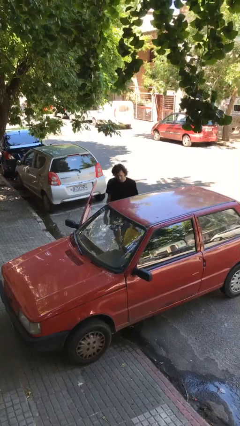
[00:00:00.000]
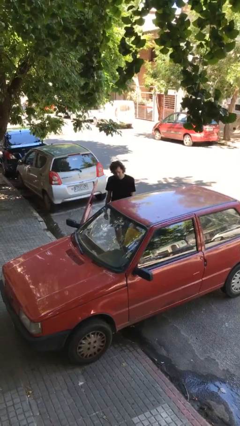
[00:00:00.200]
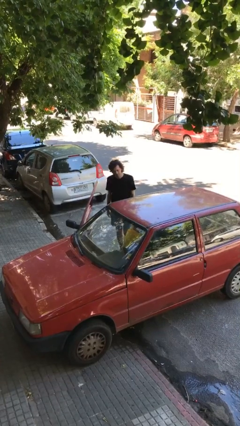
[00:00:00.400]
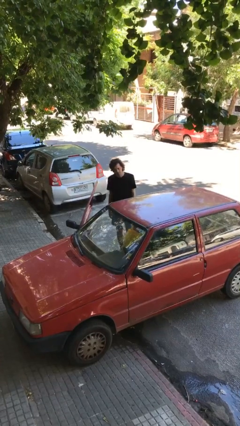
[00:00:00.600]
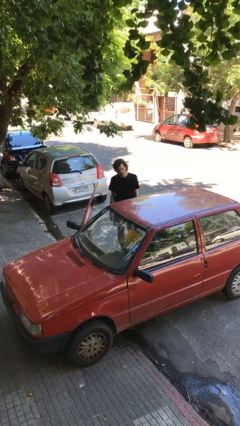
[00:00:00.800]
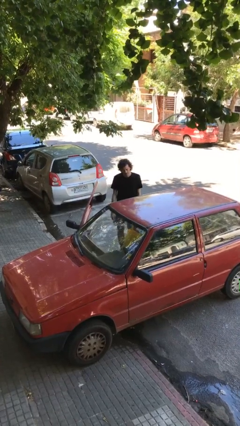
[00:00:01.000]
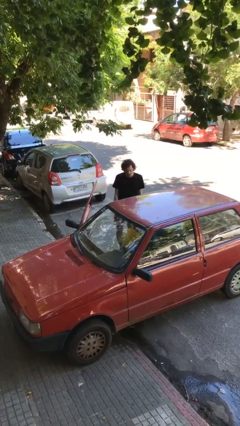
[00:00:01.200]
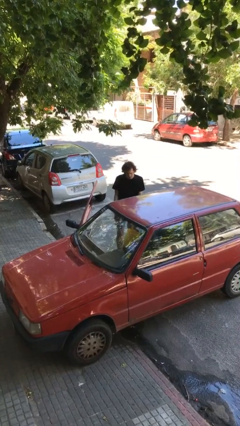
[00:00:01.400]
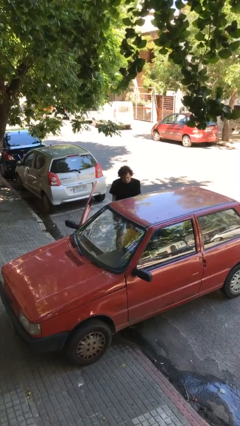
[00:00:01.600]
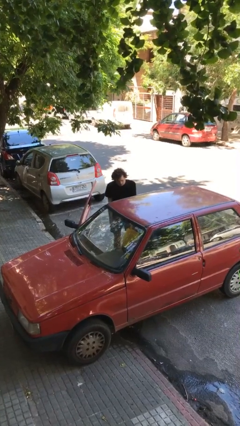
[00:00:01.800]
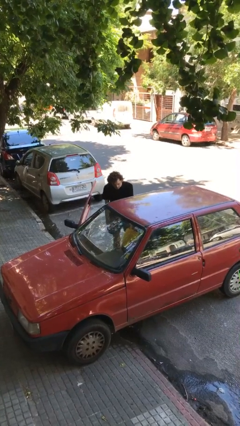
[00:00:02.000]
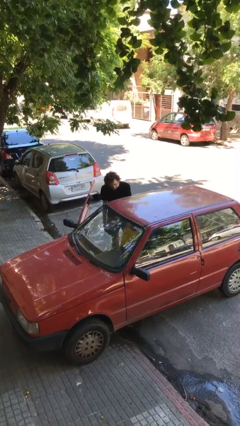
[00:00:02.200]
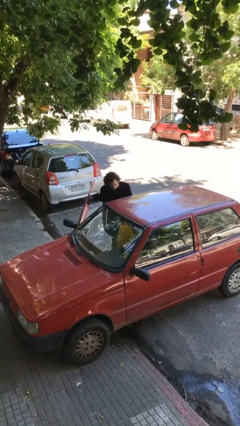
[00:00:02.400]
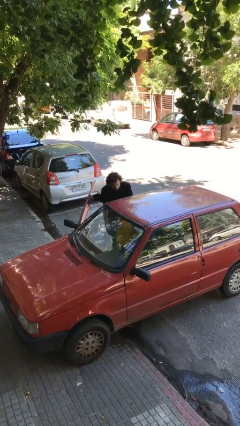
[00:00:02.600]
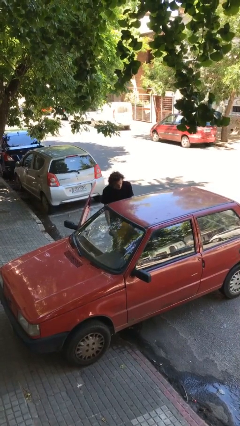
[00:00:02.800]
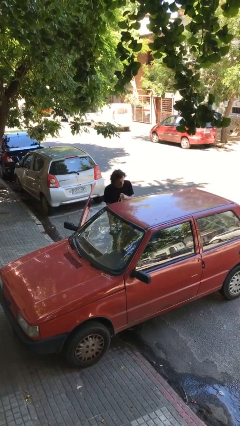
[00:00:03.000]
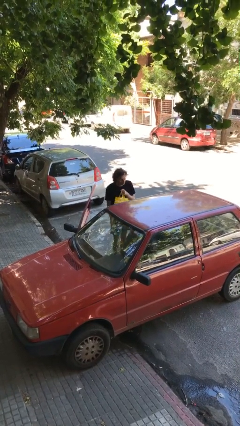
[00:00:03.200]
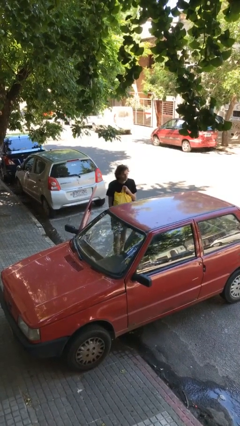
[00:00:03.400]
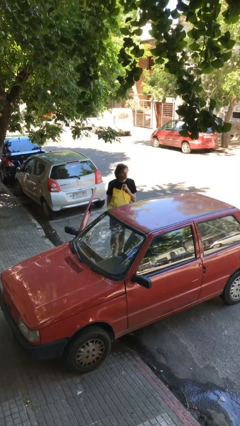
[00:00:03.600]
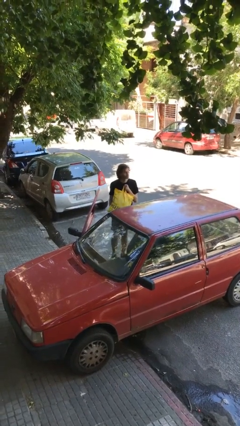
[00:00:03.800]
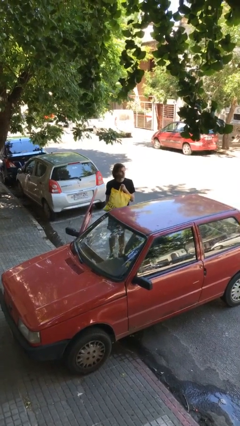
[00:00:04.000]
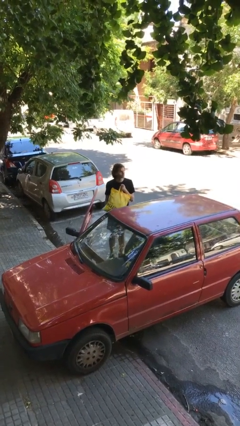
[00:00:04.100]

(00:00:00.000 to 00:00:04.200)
person unloads car

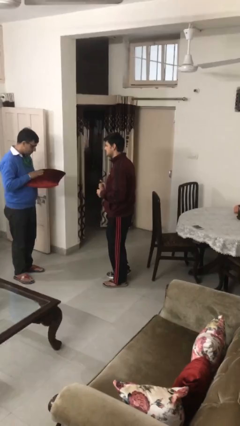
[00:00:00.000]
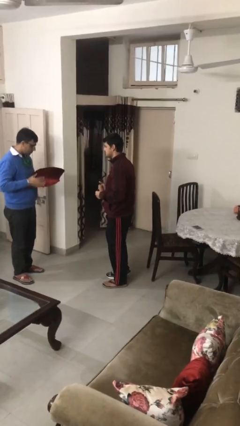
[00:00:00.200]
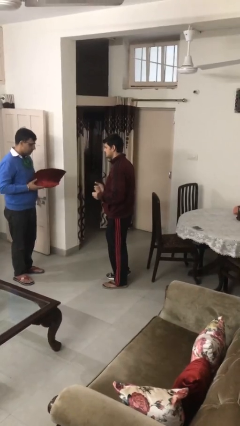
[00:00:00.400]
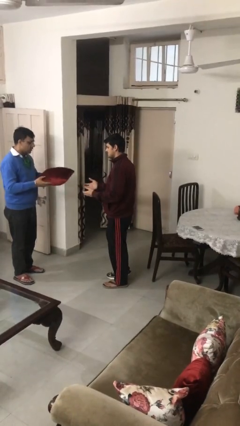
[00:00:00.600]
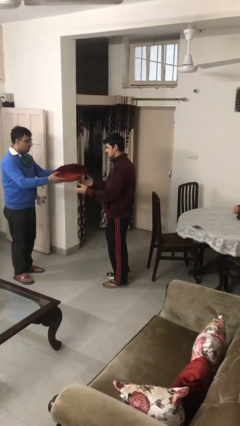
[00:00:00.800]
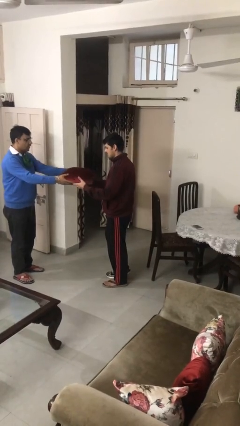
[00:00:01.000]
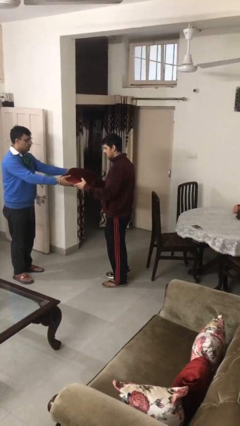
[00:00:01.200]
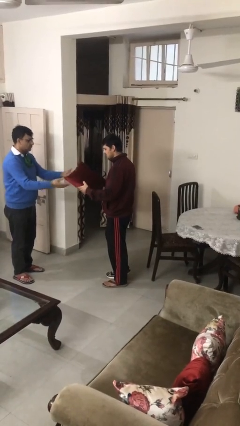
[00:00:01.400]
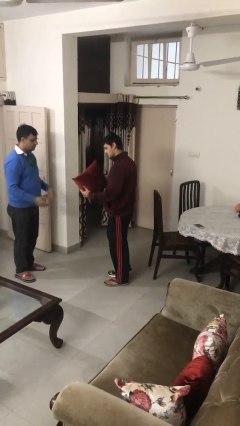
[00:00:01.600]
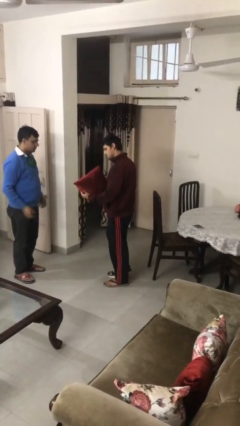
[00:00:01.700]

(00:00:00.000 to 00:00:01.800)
person transfers object to person

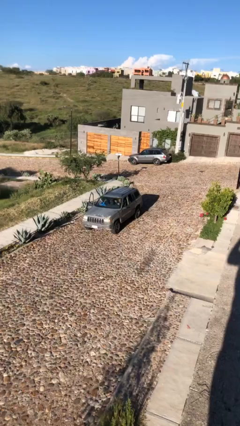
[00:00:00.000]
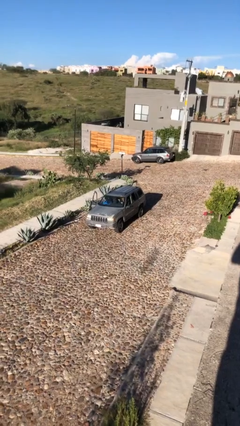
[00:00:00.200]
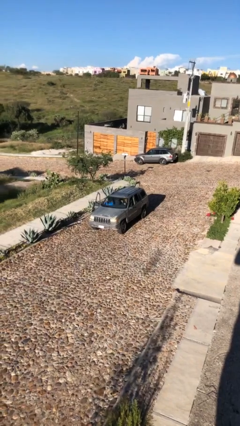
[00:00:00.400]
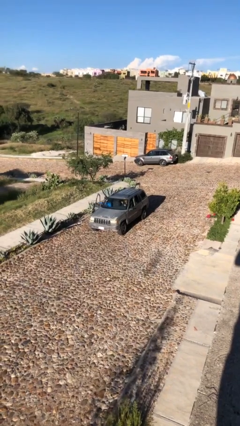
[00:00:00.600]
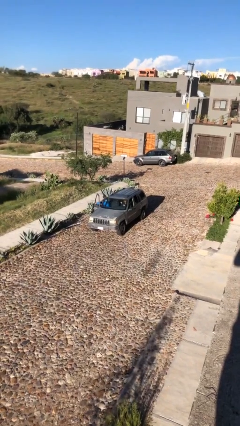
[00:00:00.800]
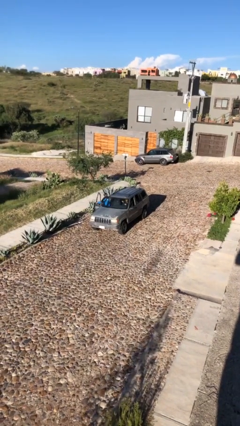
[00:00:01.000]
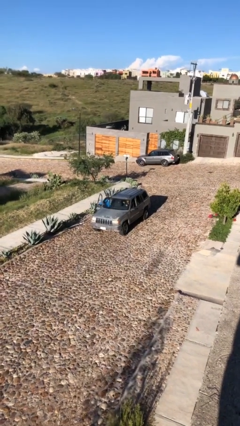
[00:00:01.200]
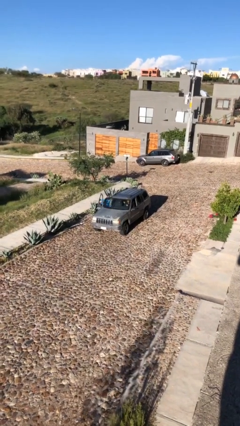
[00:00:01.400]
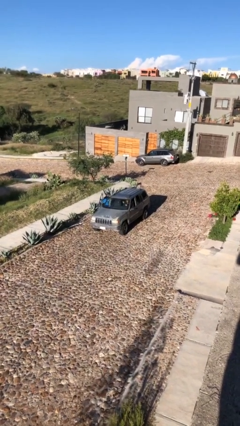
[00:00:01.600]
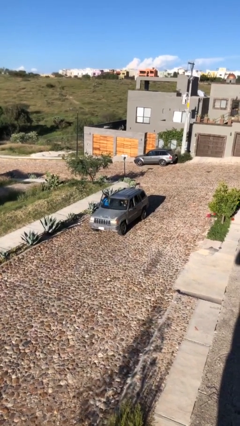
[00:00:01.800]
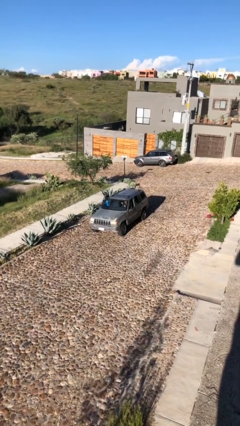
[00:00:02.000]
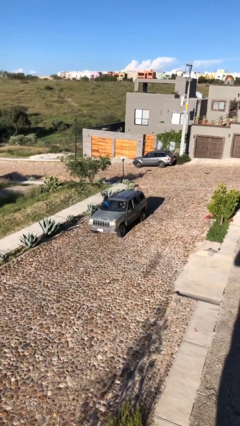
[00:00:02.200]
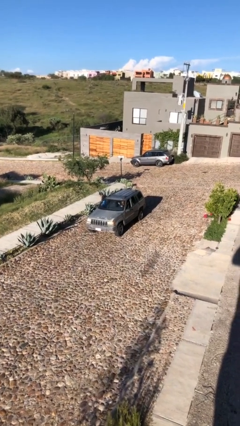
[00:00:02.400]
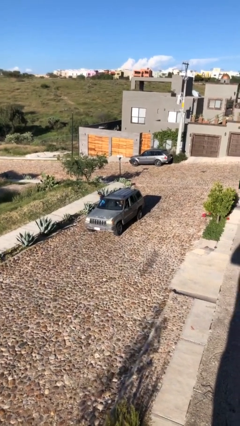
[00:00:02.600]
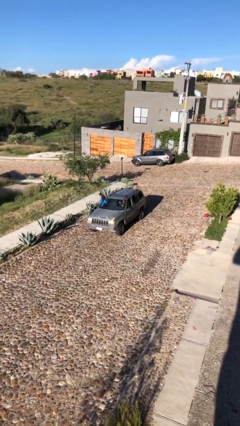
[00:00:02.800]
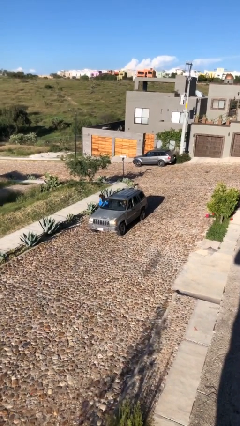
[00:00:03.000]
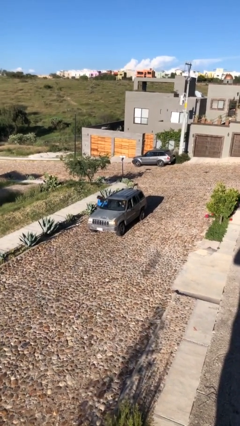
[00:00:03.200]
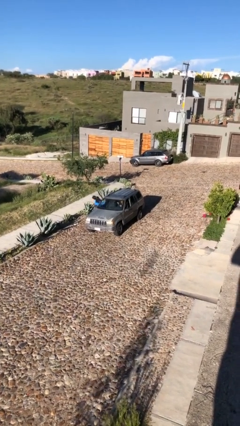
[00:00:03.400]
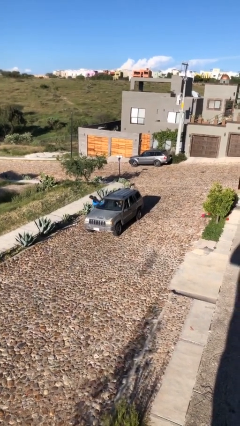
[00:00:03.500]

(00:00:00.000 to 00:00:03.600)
car drops off person

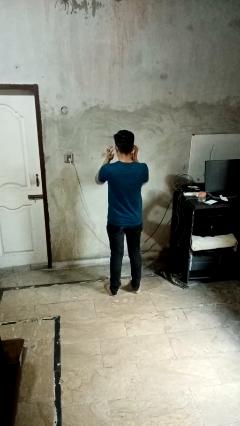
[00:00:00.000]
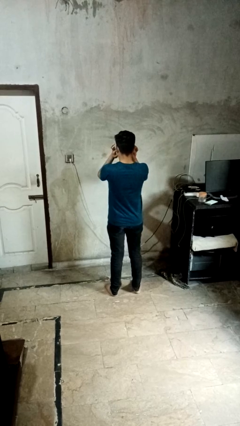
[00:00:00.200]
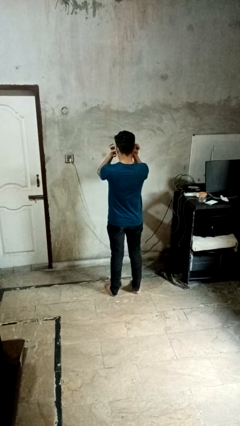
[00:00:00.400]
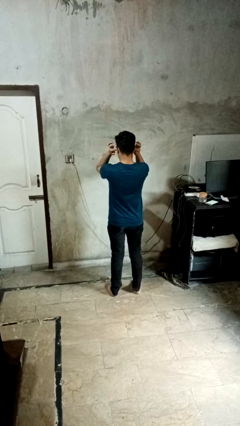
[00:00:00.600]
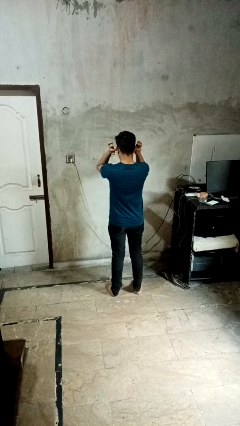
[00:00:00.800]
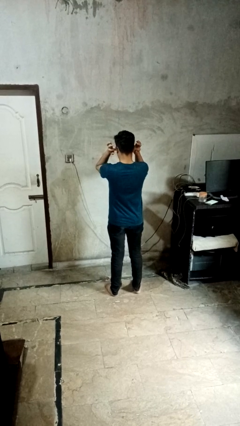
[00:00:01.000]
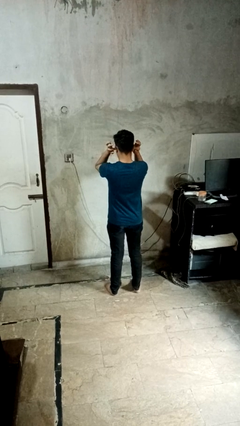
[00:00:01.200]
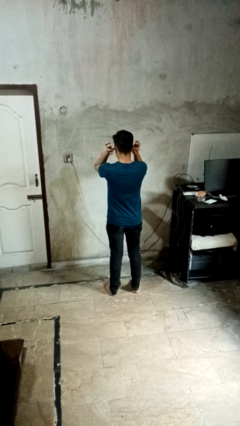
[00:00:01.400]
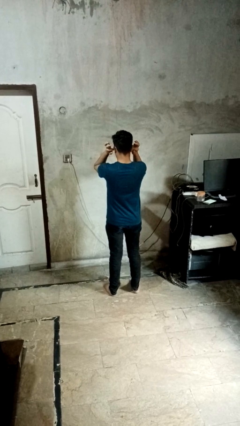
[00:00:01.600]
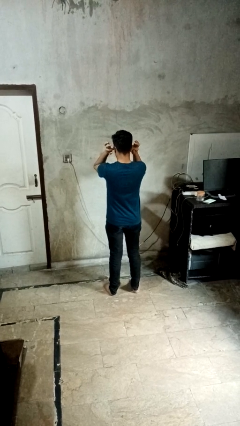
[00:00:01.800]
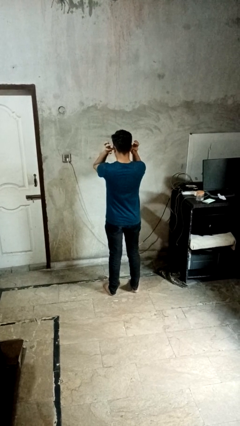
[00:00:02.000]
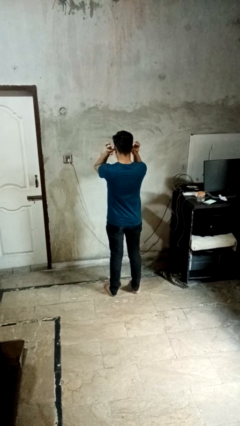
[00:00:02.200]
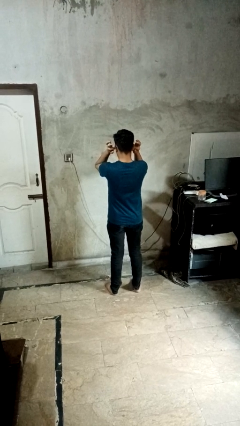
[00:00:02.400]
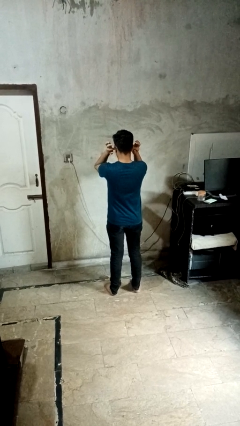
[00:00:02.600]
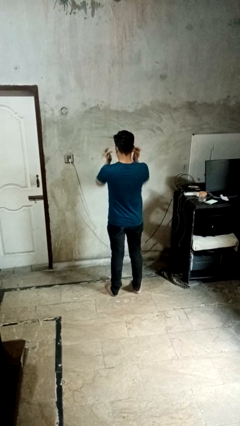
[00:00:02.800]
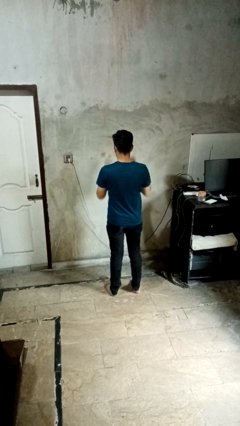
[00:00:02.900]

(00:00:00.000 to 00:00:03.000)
person puts fingers in ear

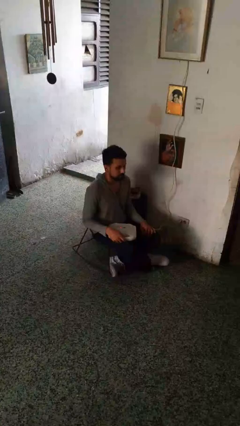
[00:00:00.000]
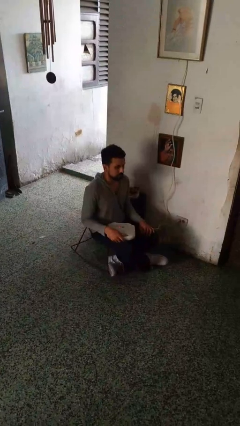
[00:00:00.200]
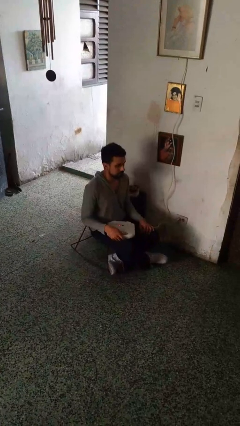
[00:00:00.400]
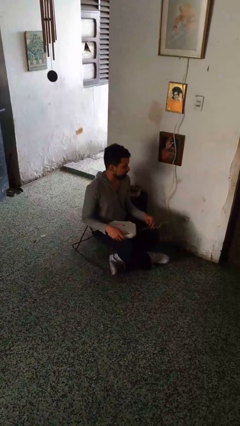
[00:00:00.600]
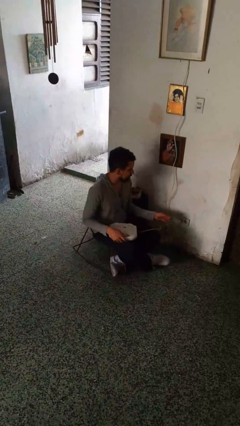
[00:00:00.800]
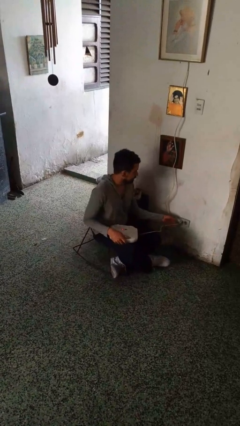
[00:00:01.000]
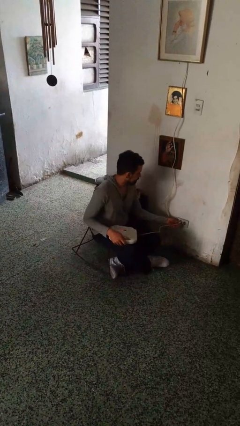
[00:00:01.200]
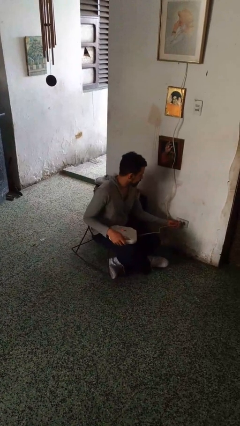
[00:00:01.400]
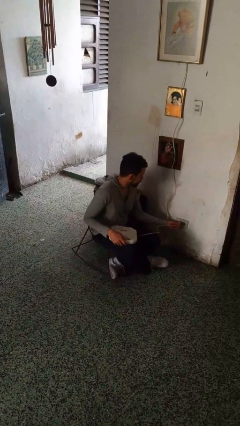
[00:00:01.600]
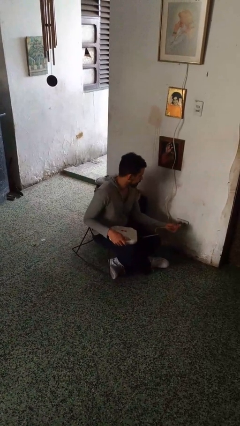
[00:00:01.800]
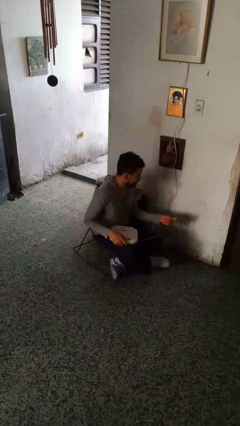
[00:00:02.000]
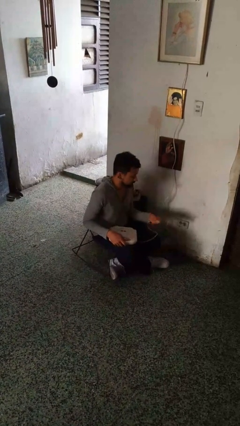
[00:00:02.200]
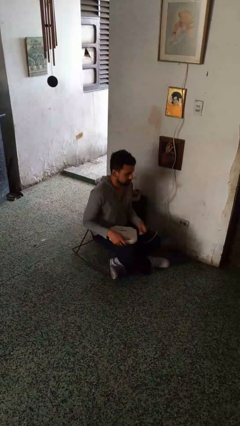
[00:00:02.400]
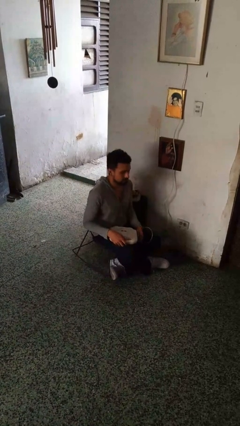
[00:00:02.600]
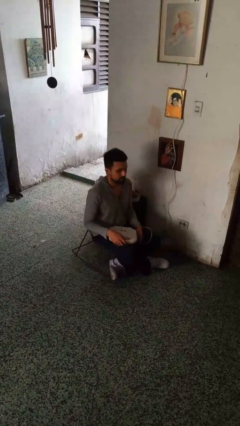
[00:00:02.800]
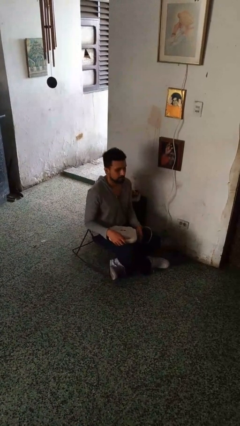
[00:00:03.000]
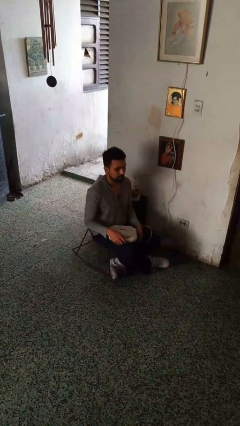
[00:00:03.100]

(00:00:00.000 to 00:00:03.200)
person unplugs from electrical socket

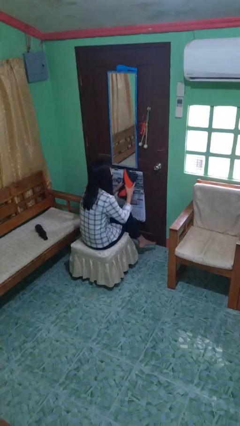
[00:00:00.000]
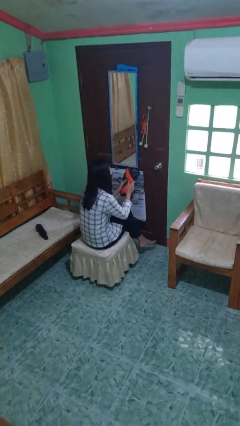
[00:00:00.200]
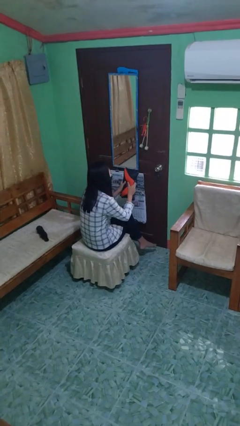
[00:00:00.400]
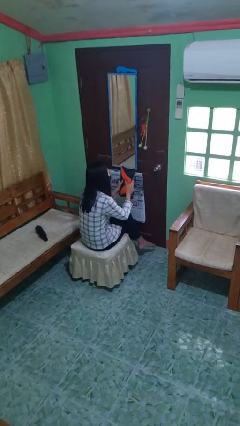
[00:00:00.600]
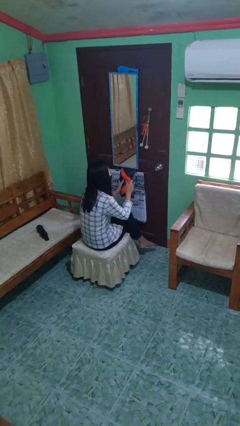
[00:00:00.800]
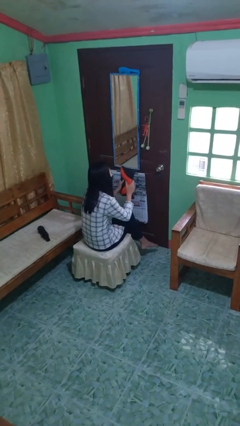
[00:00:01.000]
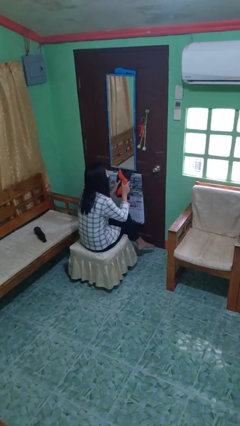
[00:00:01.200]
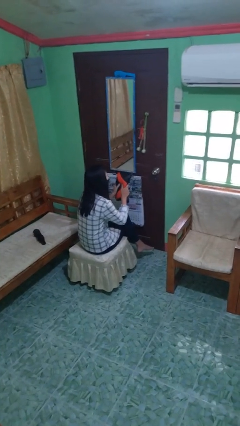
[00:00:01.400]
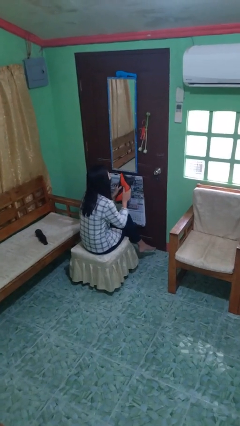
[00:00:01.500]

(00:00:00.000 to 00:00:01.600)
person squeezes object
